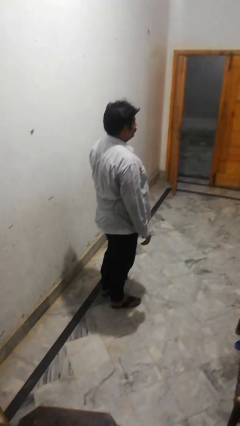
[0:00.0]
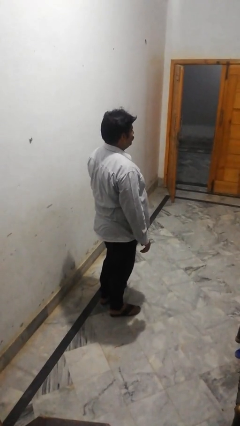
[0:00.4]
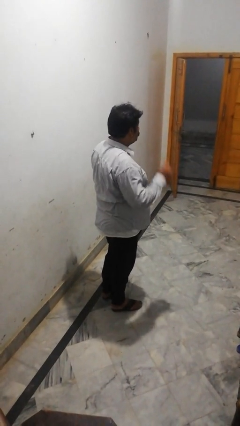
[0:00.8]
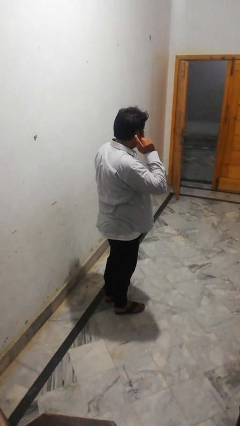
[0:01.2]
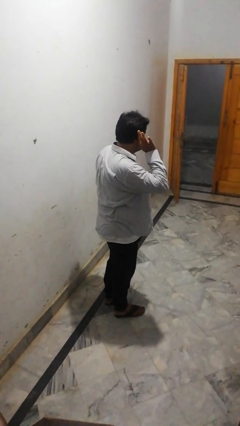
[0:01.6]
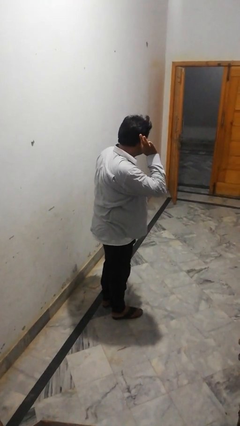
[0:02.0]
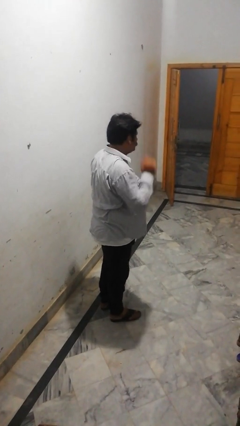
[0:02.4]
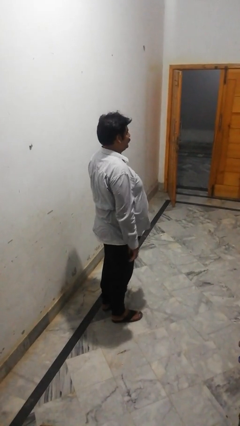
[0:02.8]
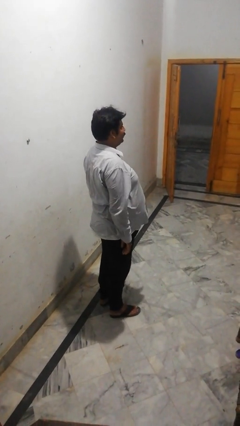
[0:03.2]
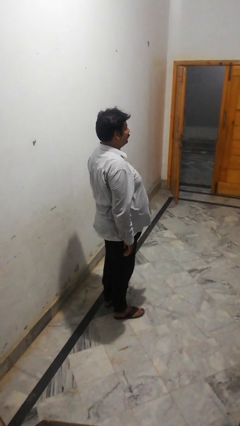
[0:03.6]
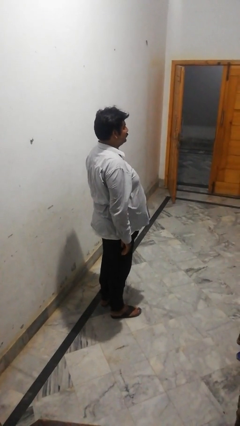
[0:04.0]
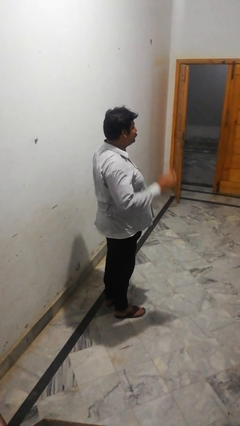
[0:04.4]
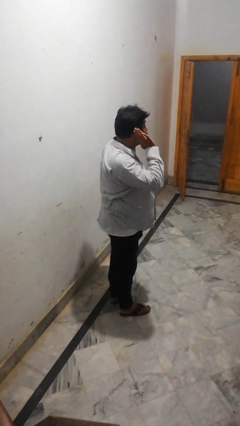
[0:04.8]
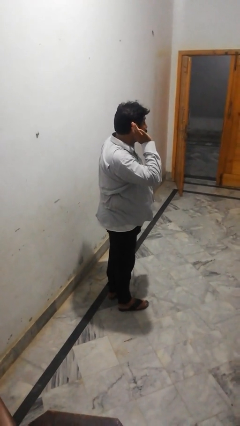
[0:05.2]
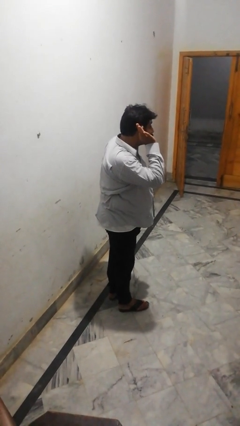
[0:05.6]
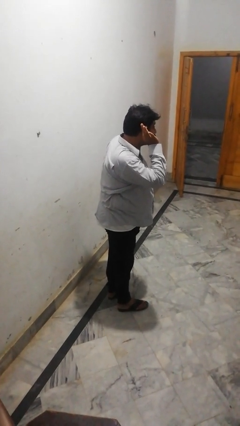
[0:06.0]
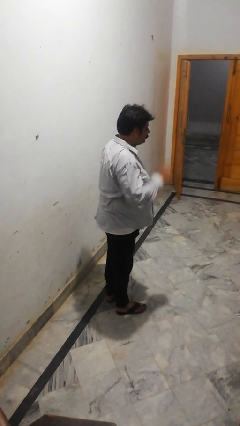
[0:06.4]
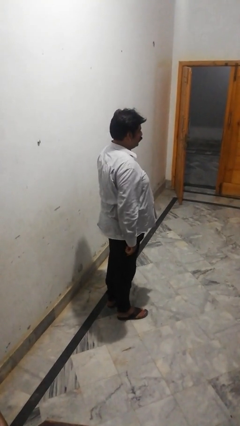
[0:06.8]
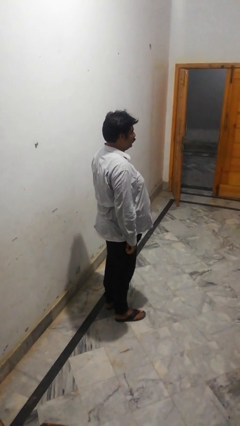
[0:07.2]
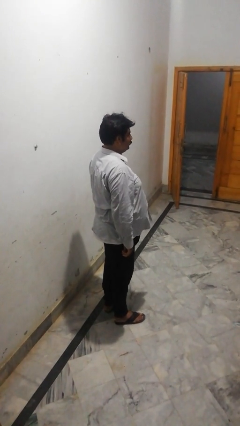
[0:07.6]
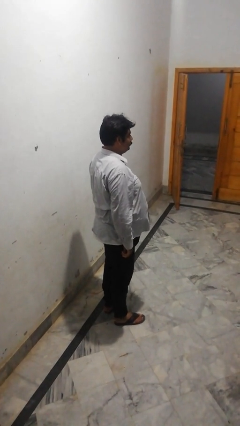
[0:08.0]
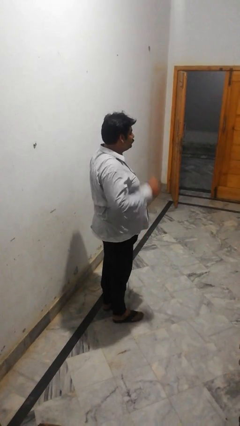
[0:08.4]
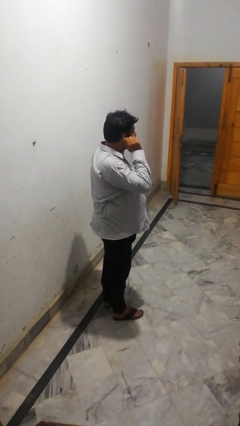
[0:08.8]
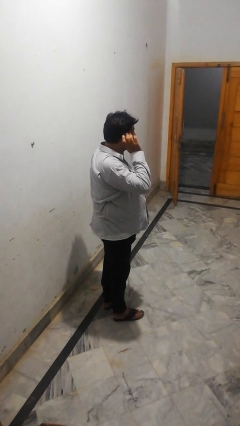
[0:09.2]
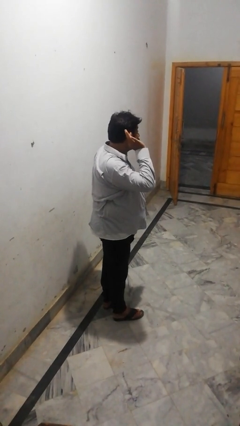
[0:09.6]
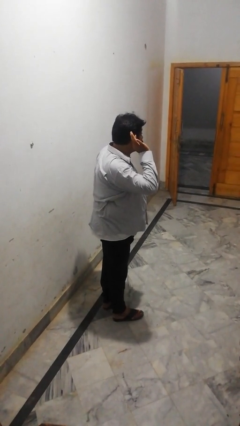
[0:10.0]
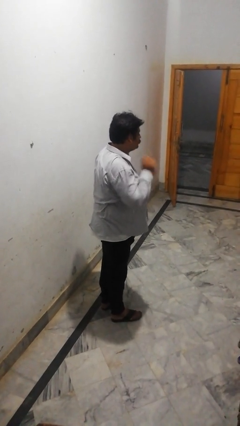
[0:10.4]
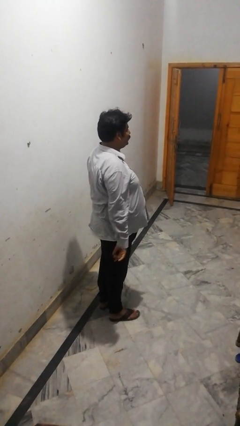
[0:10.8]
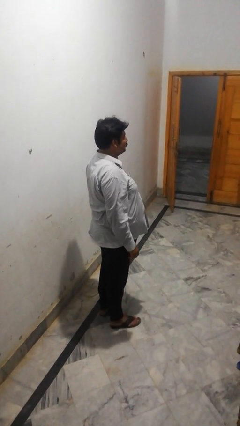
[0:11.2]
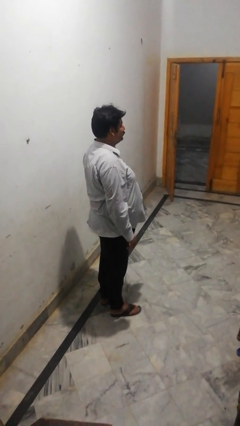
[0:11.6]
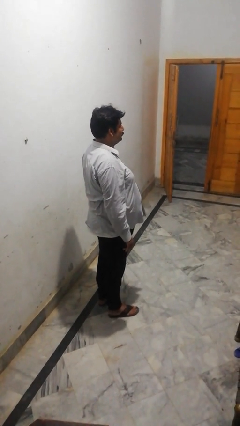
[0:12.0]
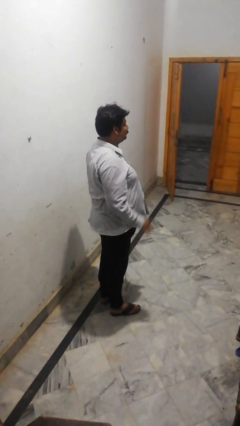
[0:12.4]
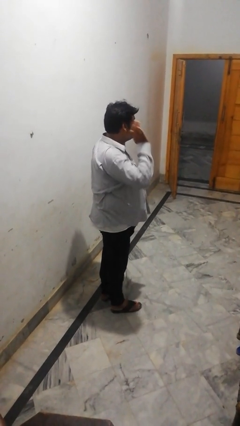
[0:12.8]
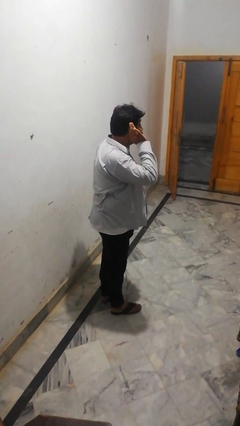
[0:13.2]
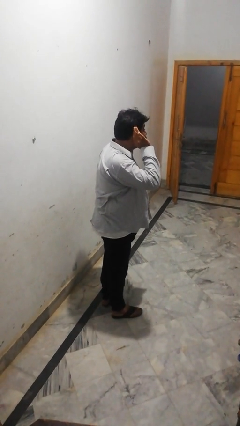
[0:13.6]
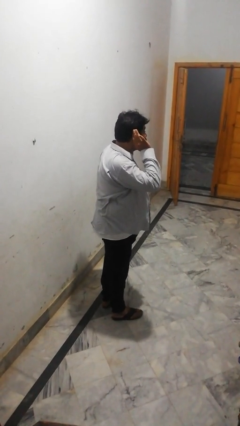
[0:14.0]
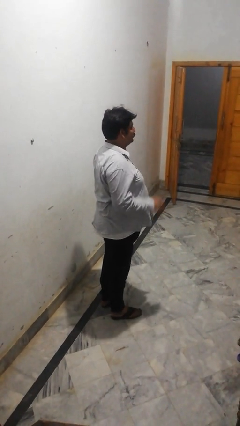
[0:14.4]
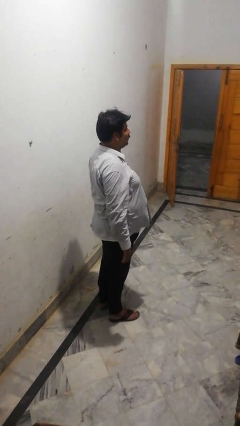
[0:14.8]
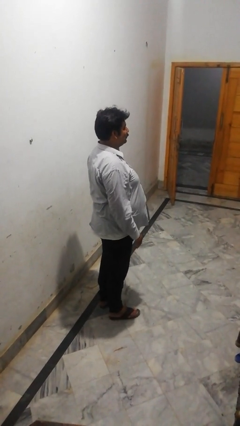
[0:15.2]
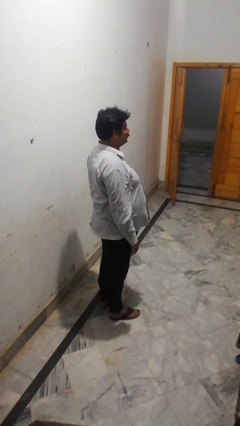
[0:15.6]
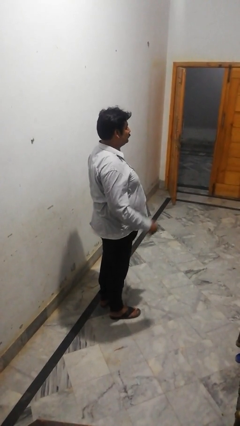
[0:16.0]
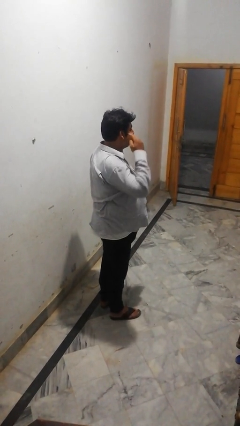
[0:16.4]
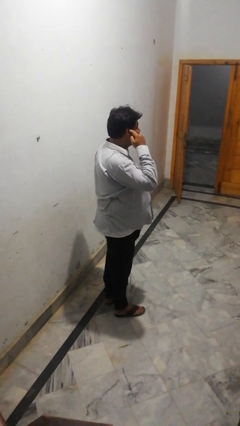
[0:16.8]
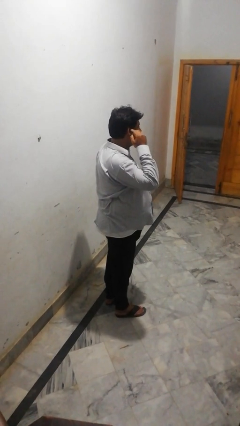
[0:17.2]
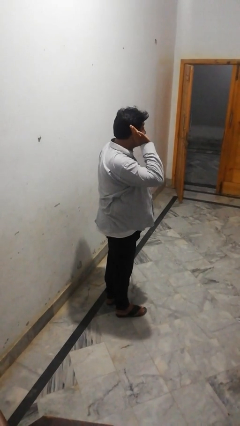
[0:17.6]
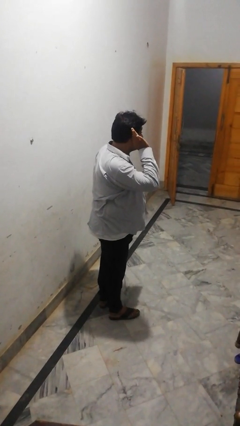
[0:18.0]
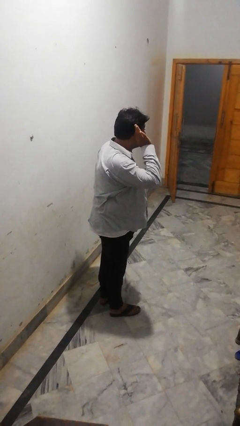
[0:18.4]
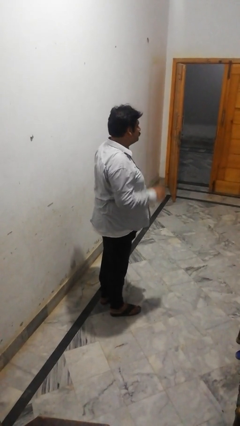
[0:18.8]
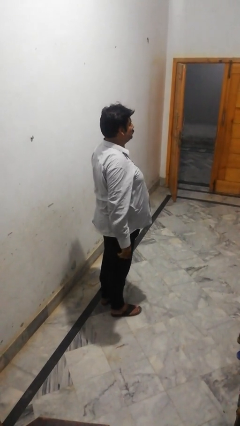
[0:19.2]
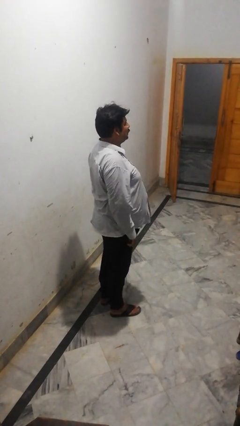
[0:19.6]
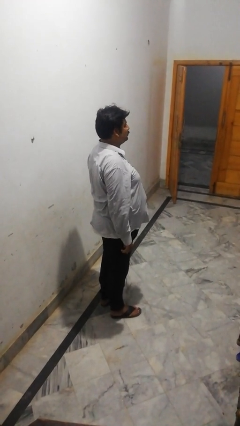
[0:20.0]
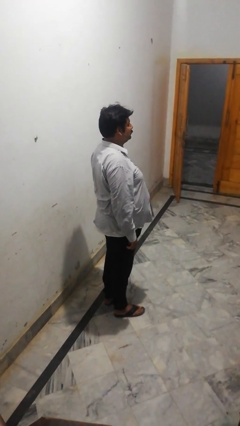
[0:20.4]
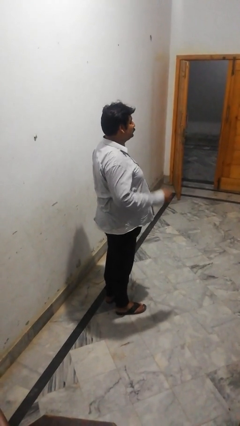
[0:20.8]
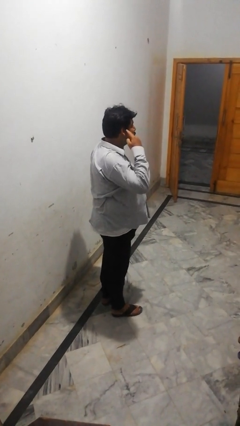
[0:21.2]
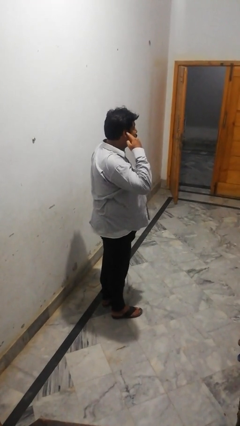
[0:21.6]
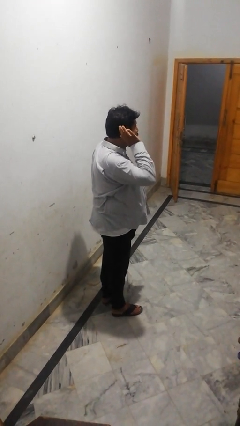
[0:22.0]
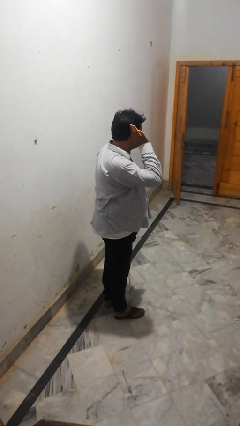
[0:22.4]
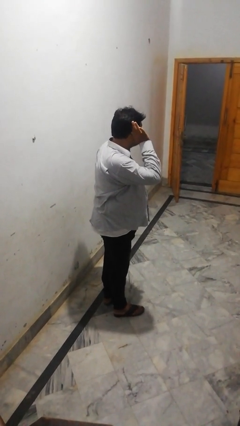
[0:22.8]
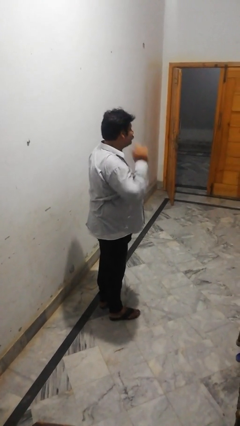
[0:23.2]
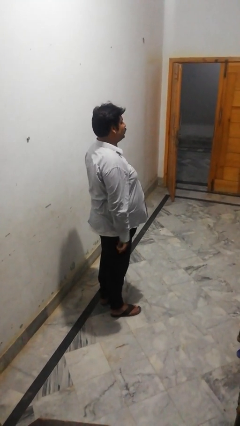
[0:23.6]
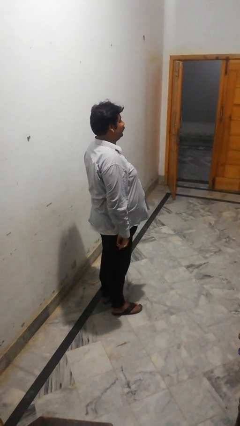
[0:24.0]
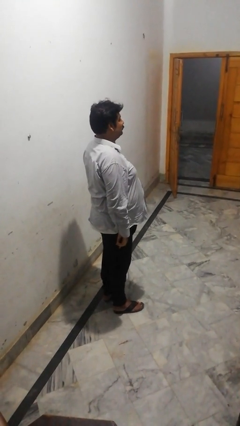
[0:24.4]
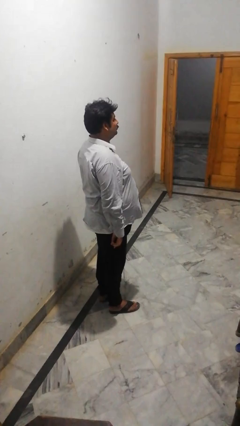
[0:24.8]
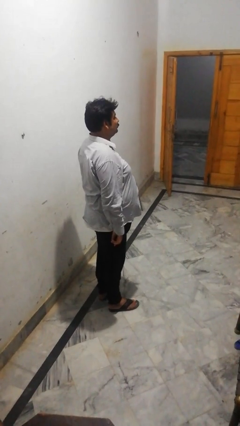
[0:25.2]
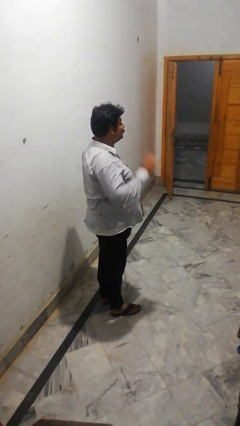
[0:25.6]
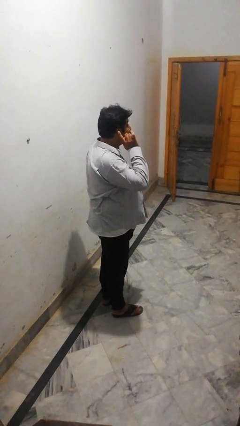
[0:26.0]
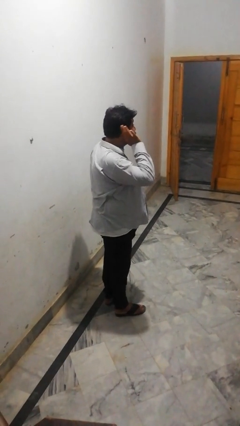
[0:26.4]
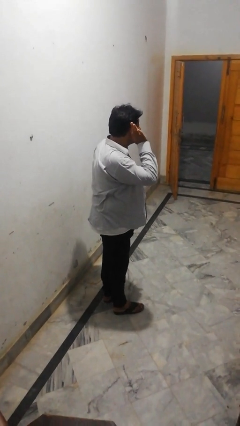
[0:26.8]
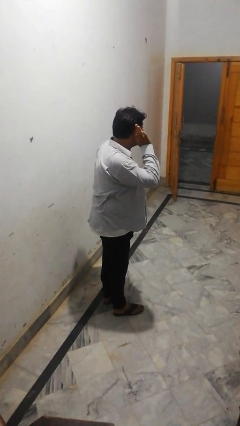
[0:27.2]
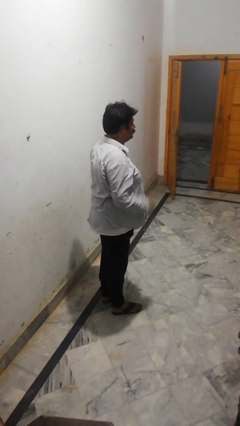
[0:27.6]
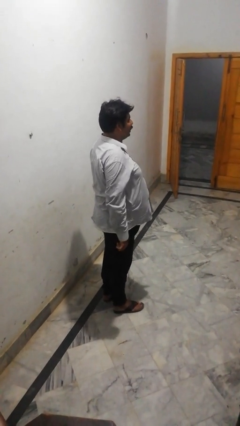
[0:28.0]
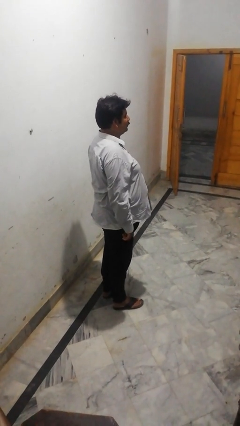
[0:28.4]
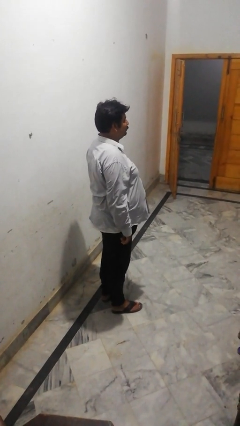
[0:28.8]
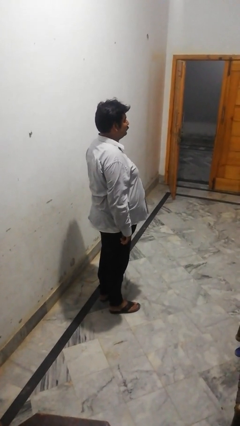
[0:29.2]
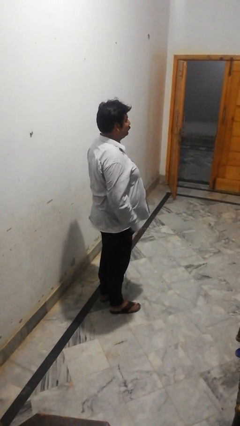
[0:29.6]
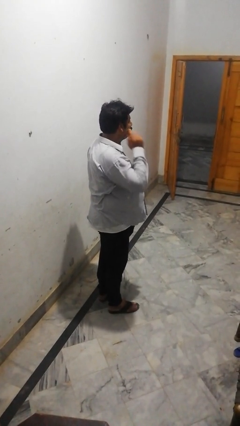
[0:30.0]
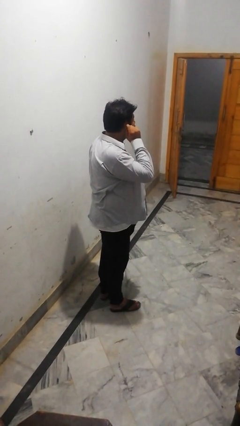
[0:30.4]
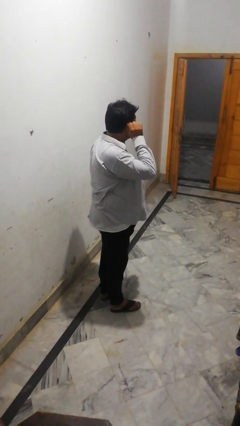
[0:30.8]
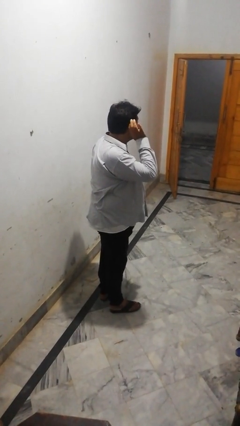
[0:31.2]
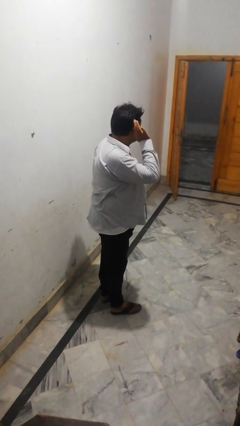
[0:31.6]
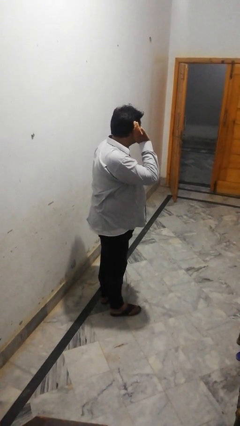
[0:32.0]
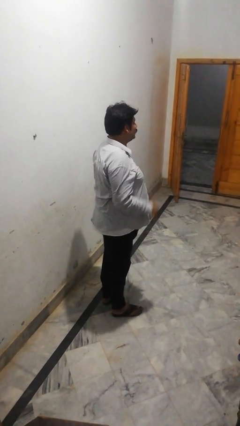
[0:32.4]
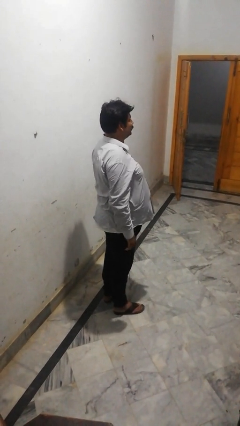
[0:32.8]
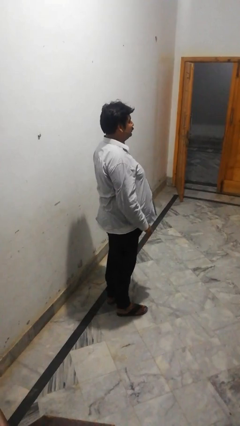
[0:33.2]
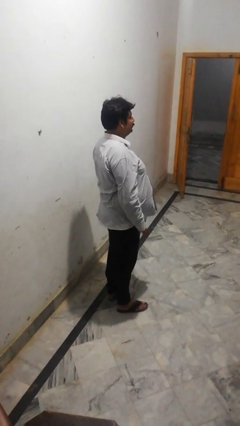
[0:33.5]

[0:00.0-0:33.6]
person gestures listen closely

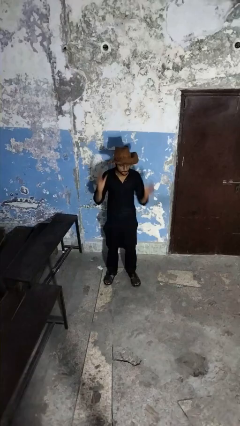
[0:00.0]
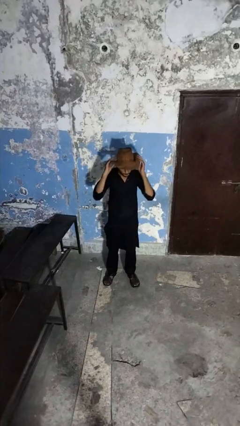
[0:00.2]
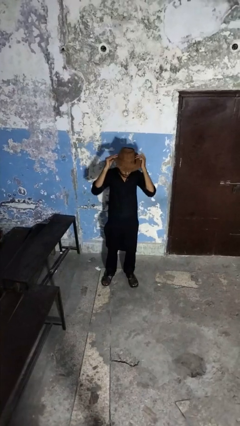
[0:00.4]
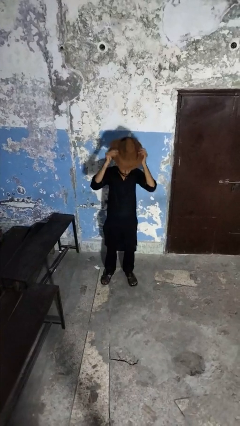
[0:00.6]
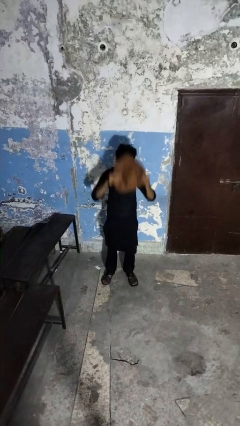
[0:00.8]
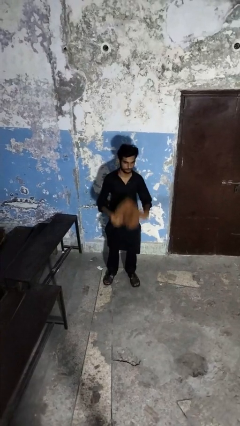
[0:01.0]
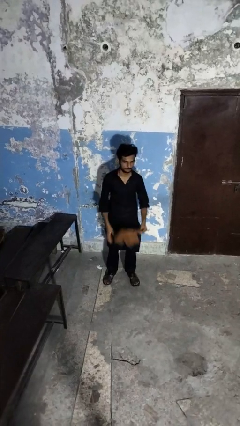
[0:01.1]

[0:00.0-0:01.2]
person takes off hat
